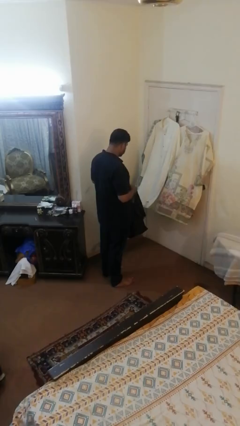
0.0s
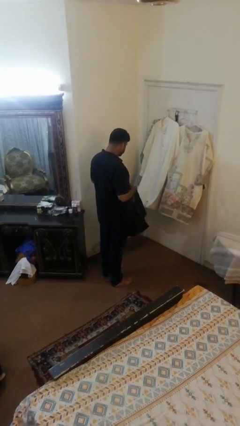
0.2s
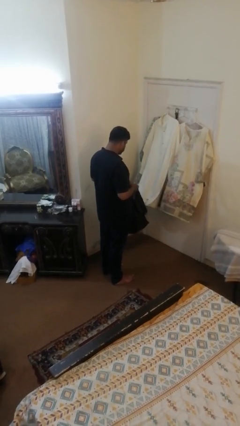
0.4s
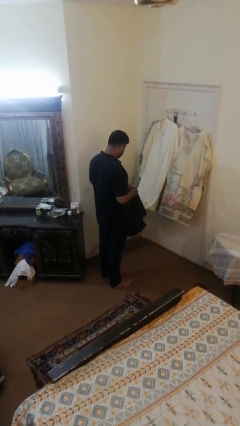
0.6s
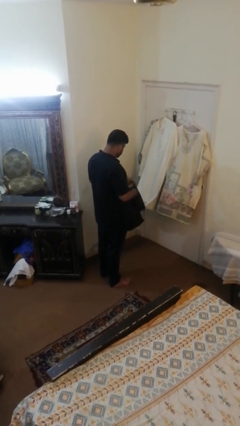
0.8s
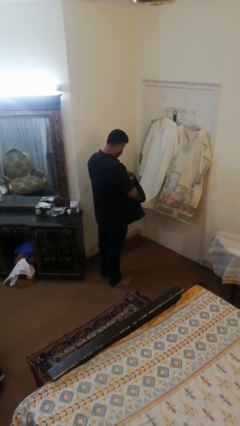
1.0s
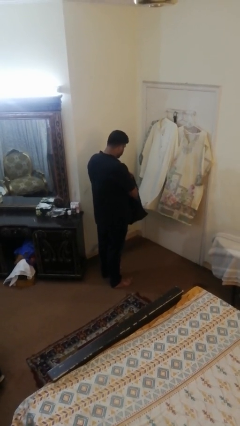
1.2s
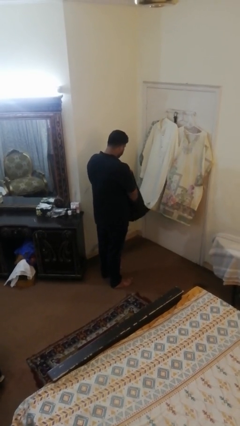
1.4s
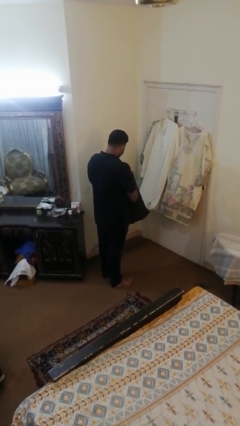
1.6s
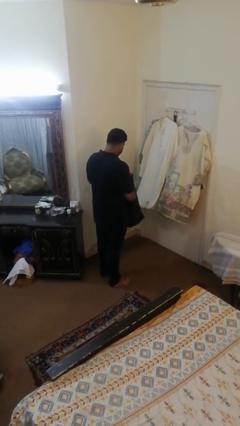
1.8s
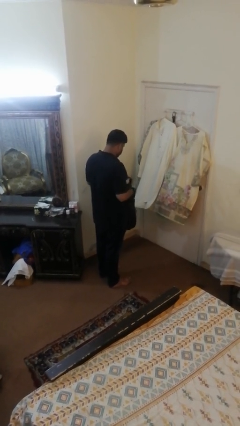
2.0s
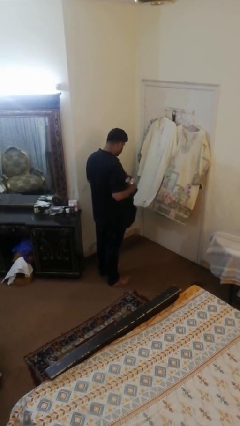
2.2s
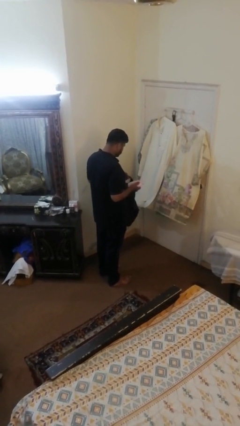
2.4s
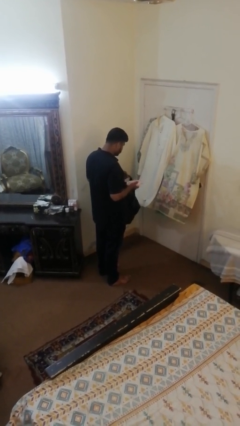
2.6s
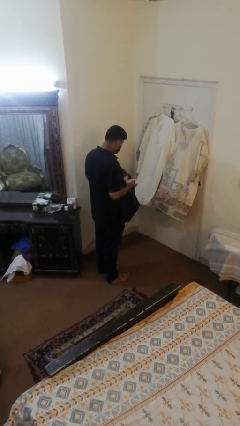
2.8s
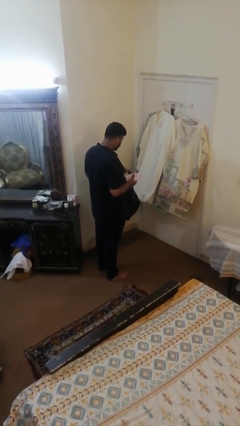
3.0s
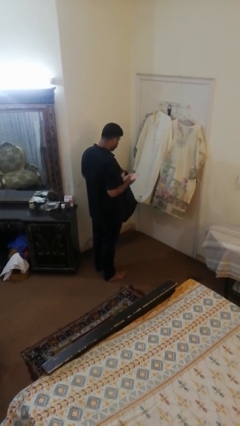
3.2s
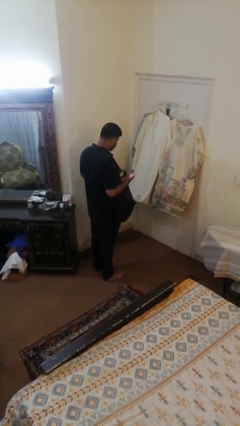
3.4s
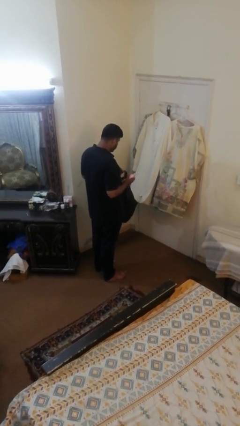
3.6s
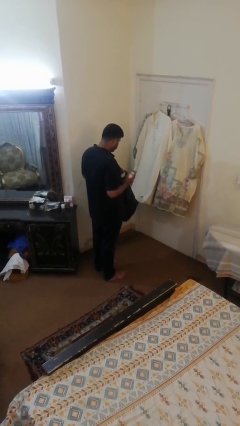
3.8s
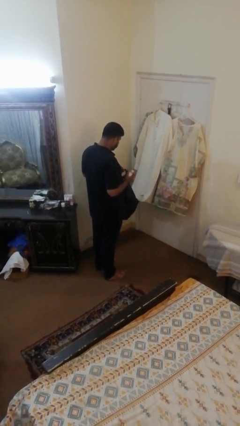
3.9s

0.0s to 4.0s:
person takes object from bag

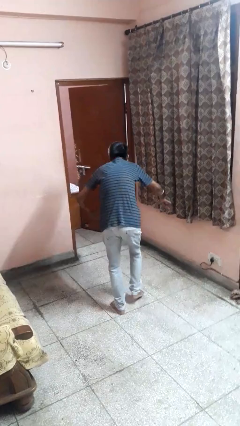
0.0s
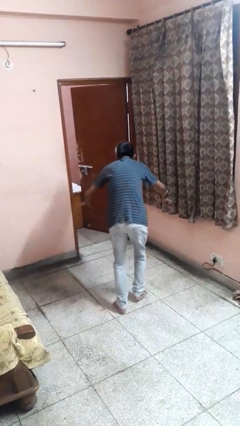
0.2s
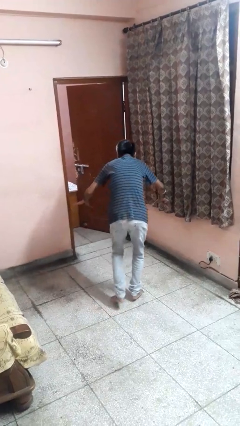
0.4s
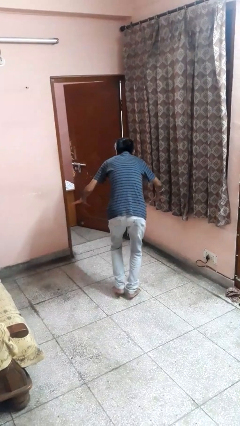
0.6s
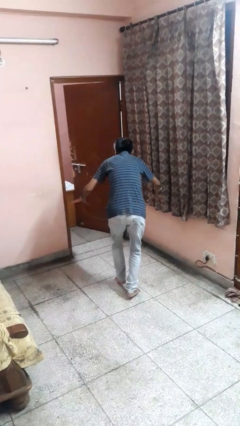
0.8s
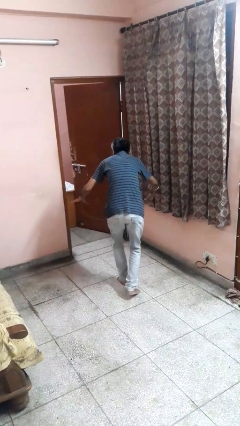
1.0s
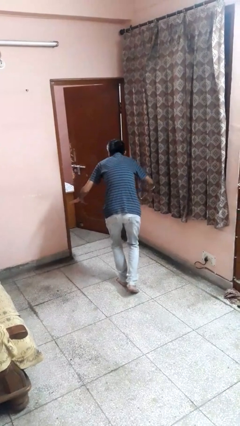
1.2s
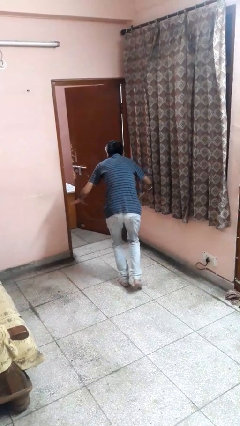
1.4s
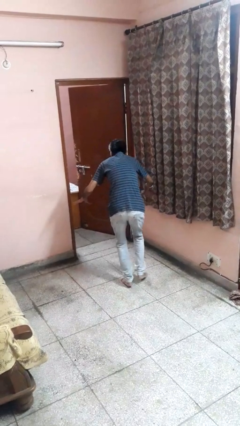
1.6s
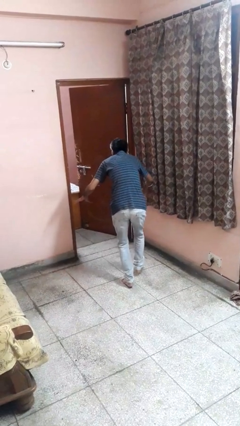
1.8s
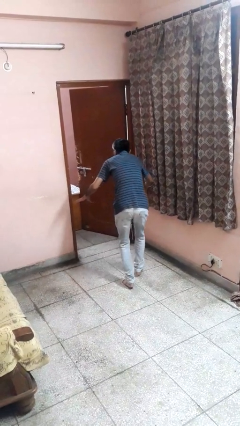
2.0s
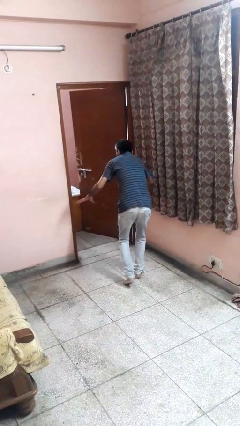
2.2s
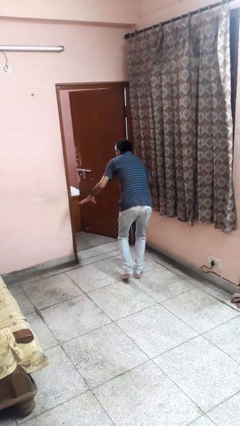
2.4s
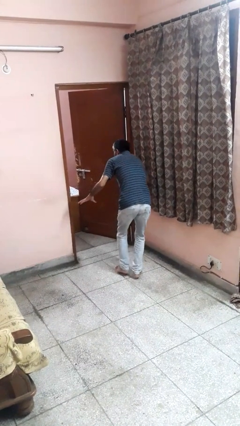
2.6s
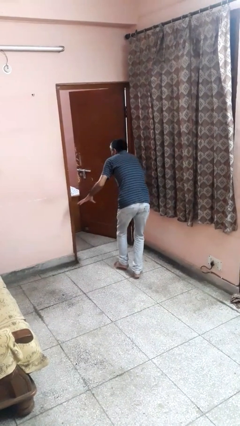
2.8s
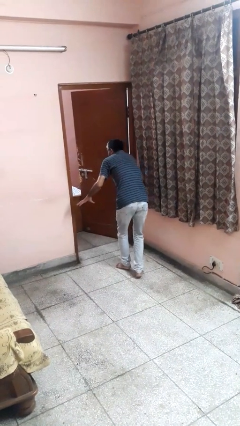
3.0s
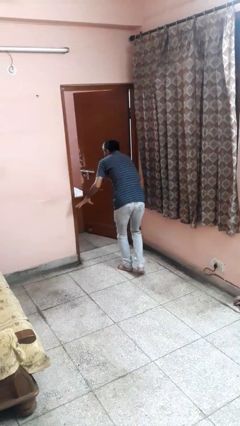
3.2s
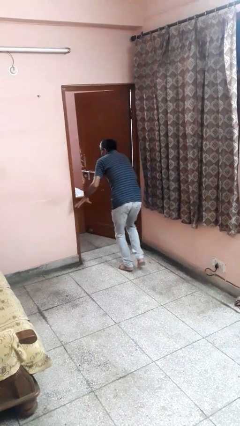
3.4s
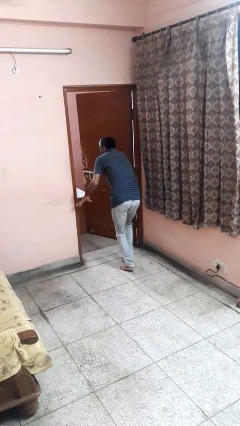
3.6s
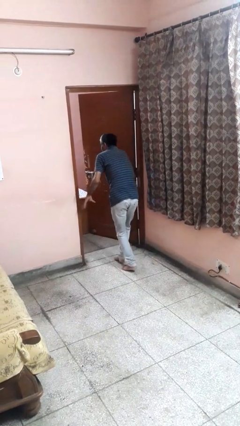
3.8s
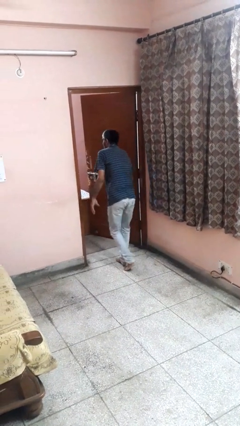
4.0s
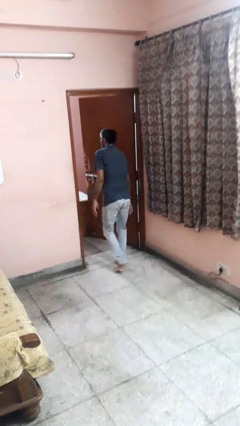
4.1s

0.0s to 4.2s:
person walks tiptoe

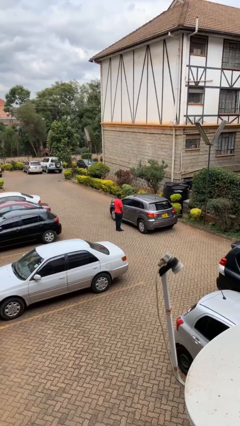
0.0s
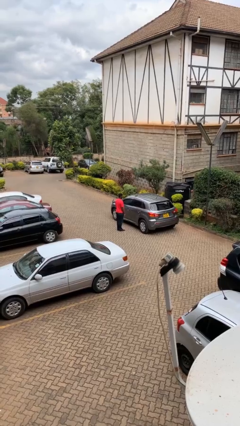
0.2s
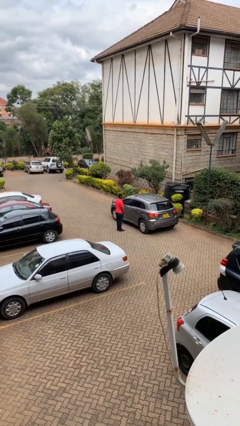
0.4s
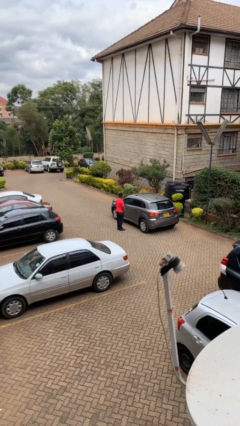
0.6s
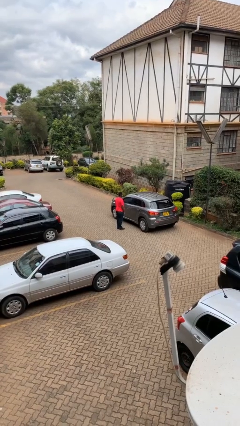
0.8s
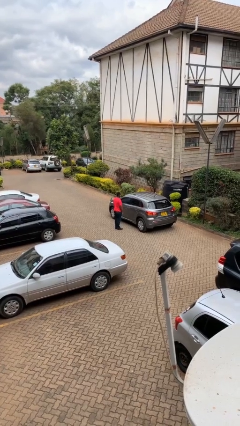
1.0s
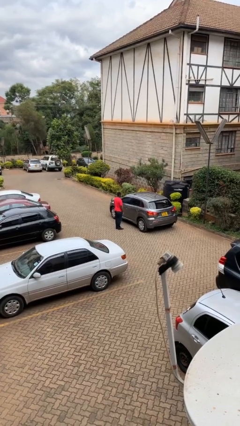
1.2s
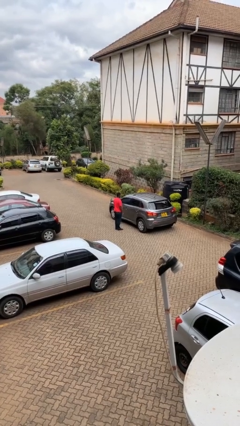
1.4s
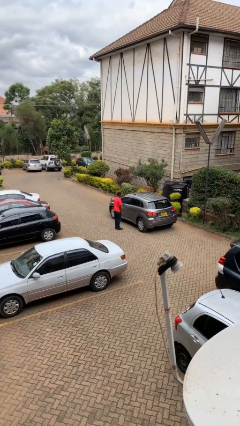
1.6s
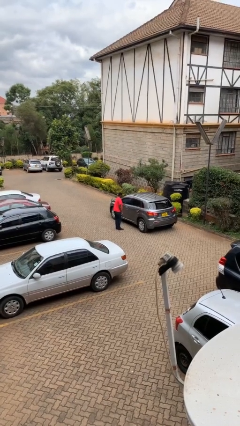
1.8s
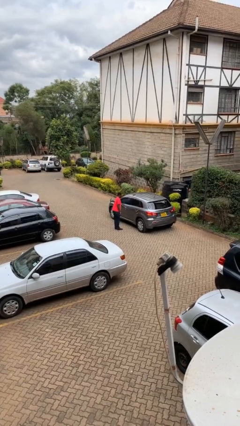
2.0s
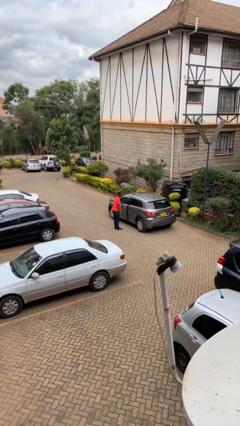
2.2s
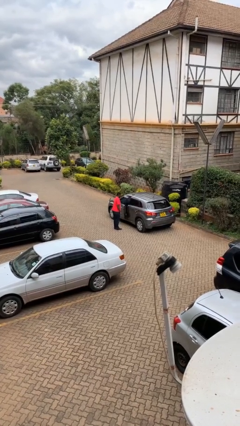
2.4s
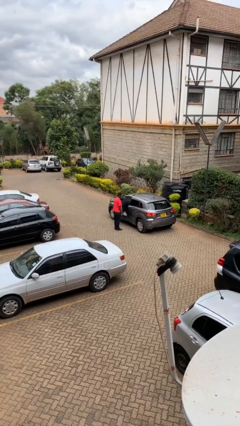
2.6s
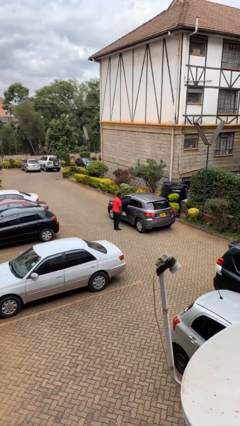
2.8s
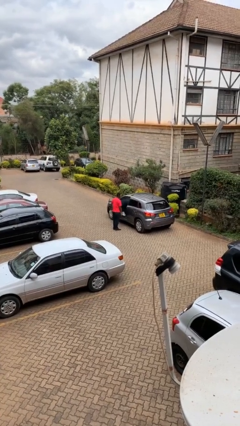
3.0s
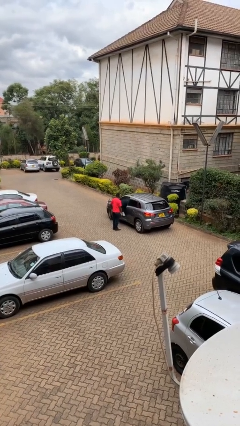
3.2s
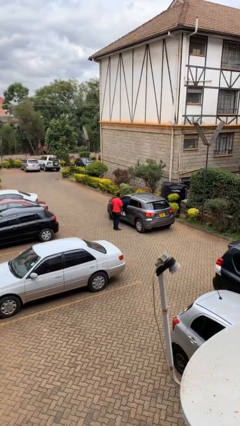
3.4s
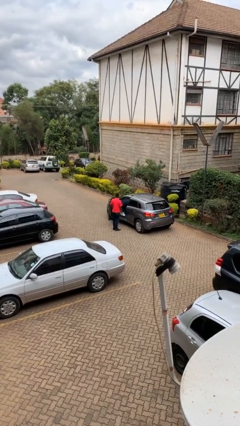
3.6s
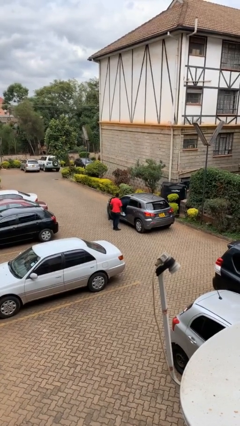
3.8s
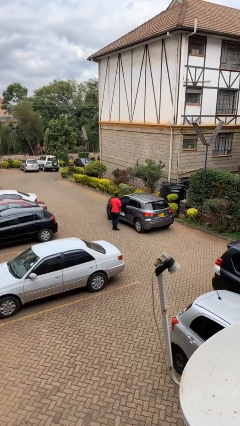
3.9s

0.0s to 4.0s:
person opens car door

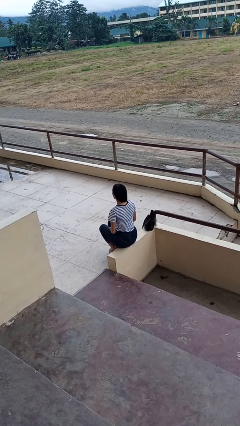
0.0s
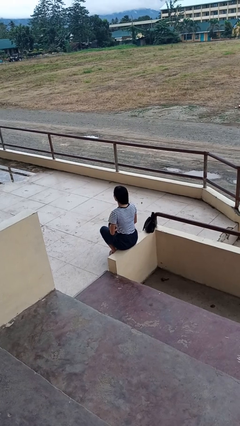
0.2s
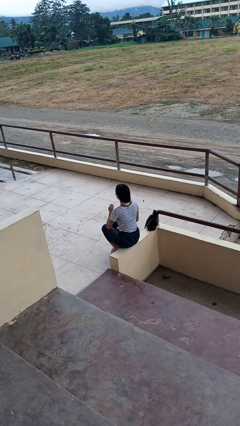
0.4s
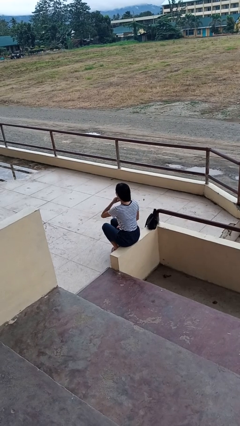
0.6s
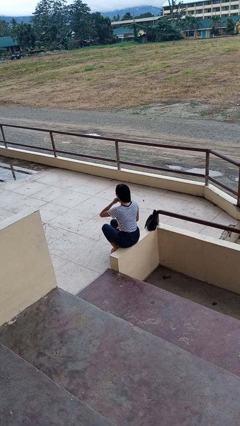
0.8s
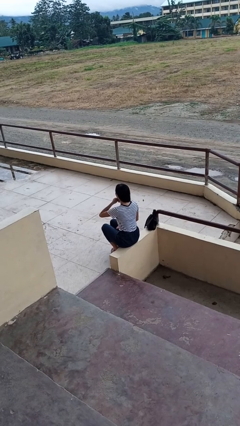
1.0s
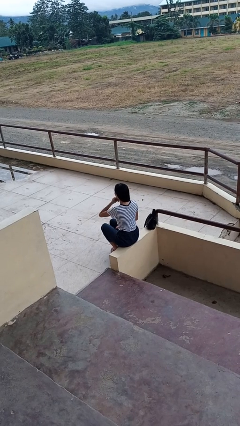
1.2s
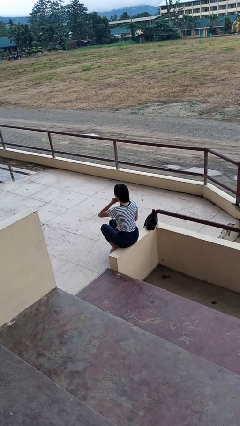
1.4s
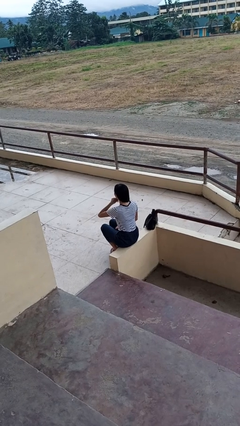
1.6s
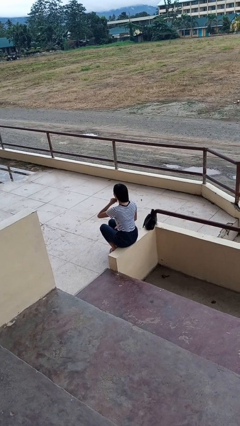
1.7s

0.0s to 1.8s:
person strokes chin

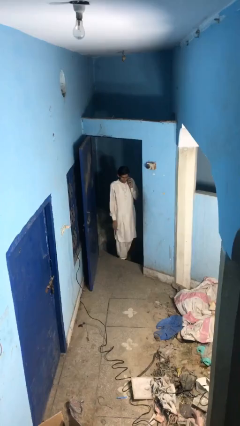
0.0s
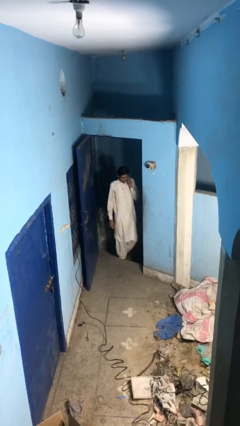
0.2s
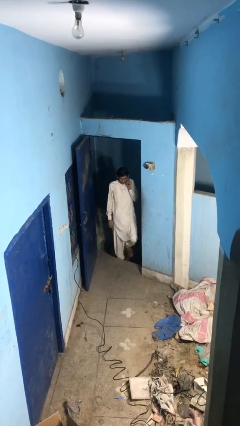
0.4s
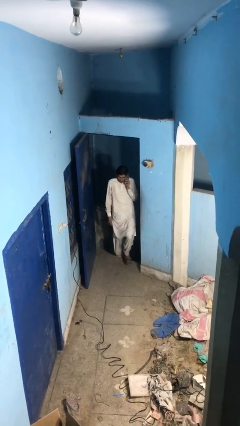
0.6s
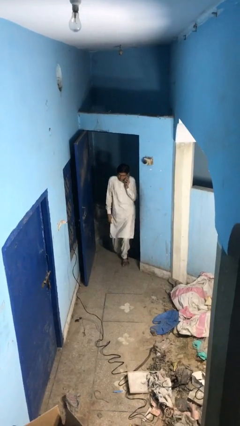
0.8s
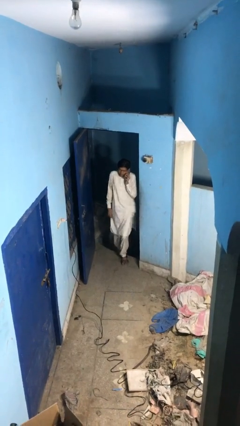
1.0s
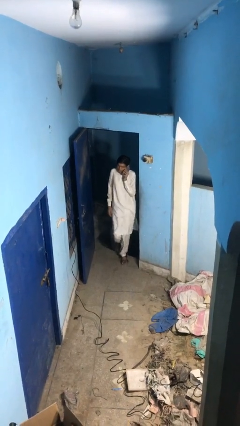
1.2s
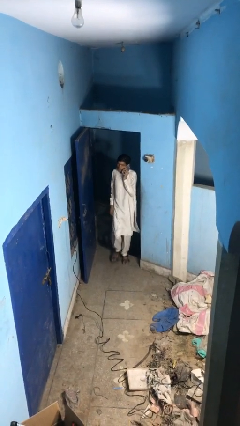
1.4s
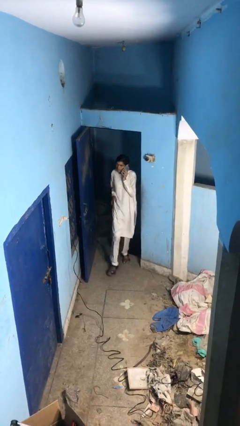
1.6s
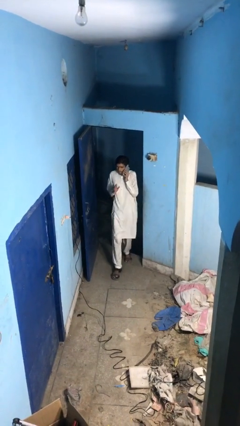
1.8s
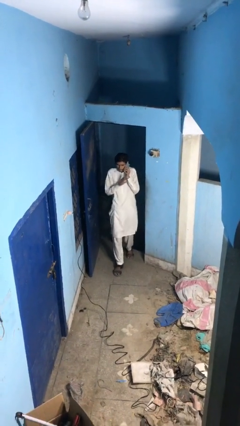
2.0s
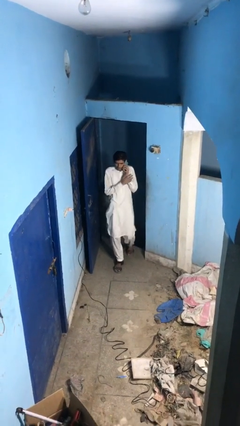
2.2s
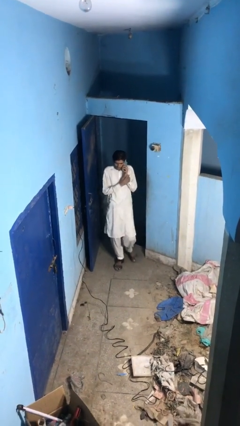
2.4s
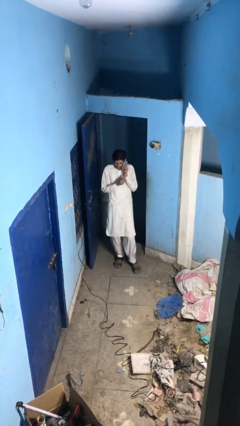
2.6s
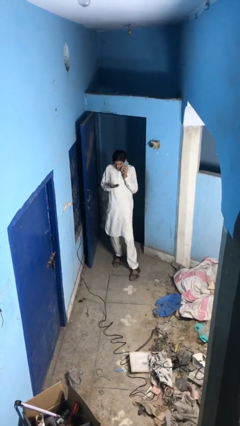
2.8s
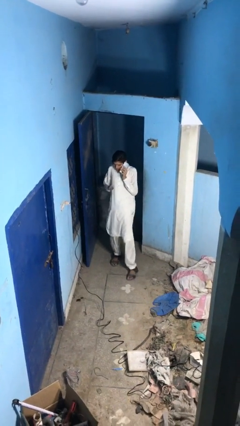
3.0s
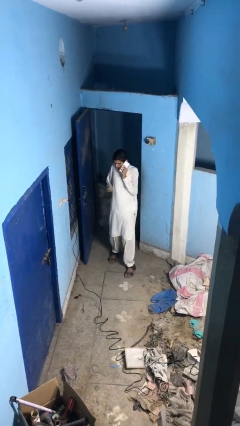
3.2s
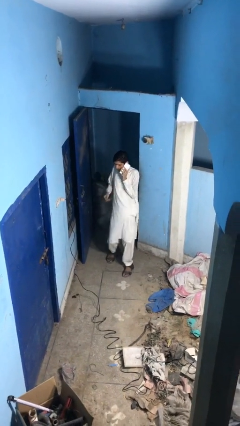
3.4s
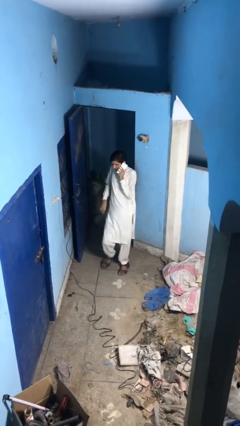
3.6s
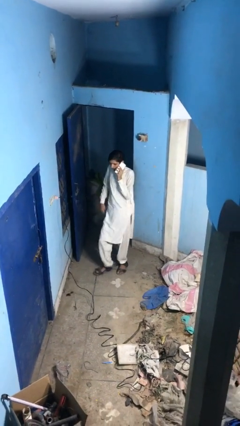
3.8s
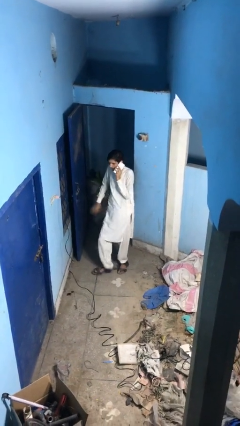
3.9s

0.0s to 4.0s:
person enters scene through structure

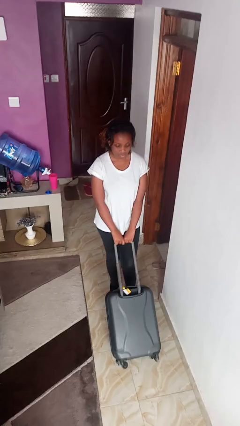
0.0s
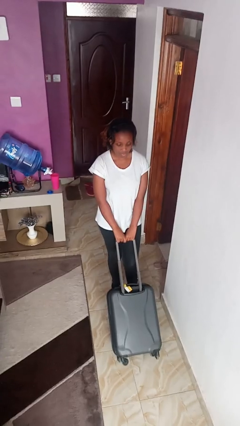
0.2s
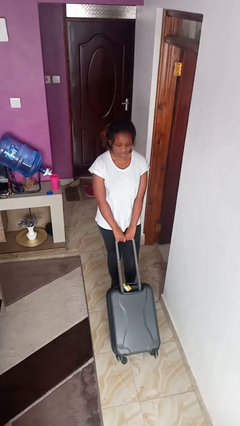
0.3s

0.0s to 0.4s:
person pulls wheeled cart
